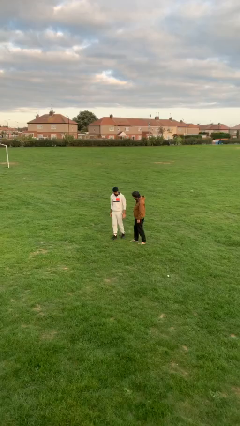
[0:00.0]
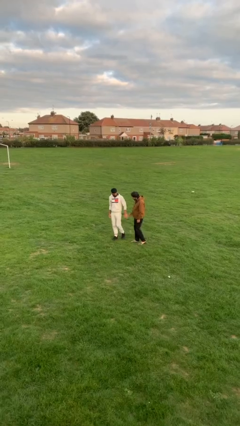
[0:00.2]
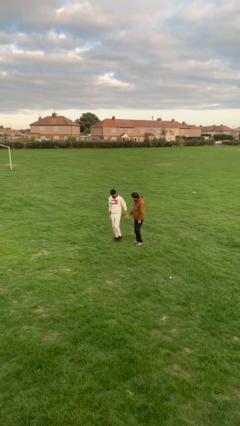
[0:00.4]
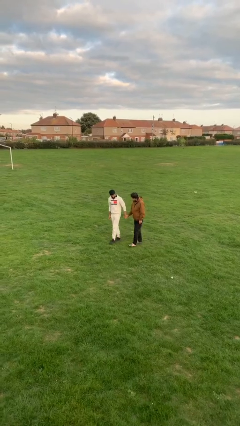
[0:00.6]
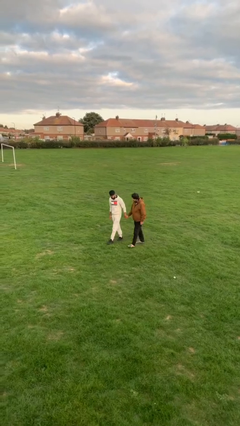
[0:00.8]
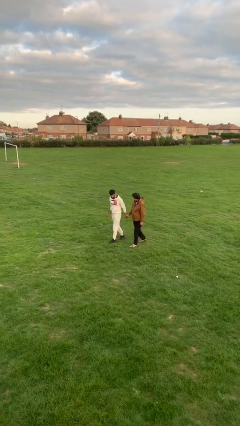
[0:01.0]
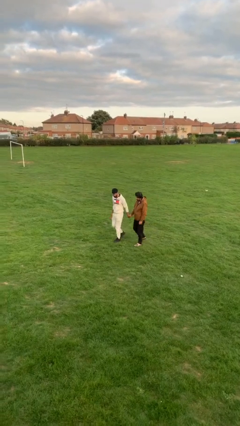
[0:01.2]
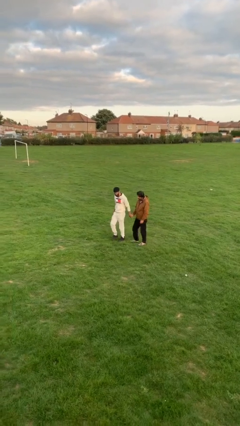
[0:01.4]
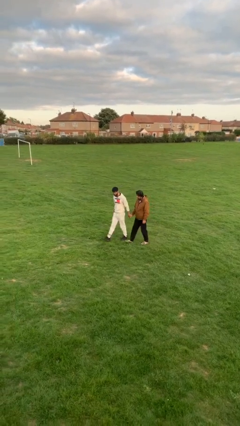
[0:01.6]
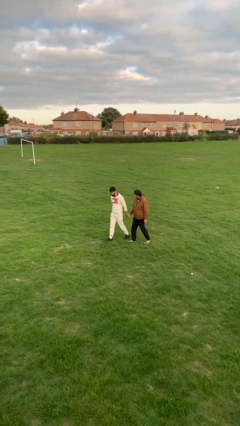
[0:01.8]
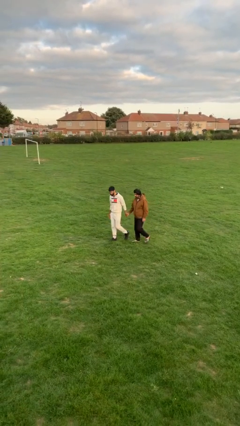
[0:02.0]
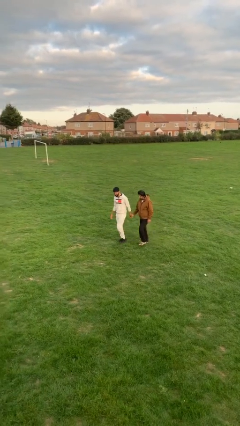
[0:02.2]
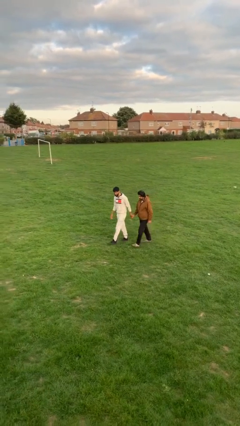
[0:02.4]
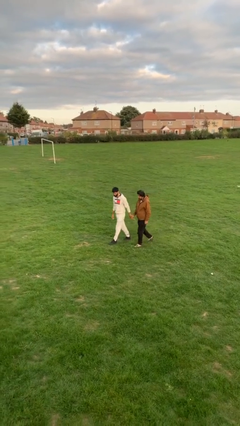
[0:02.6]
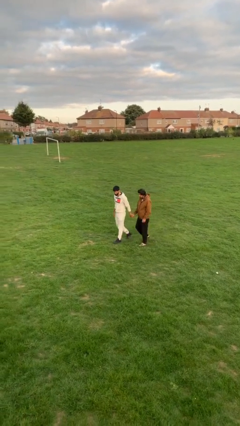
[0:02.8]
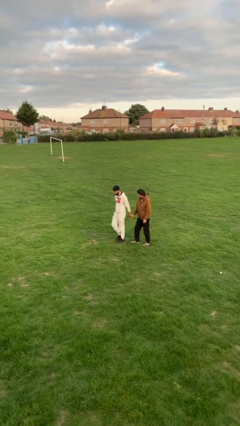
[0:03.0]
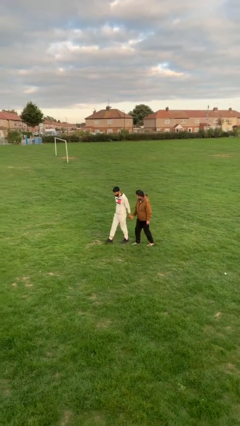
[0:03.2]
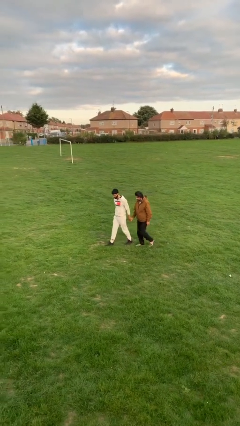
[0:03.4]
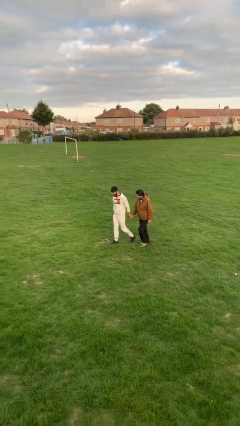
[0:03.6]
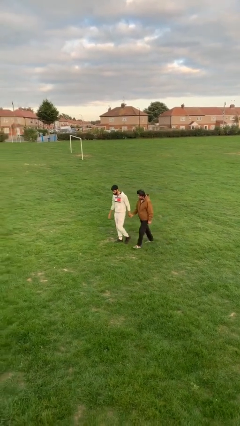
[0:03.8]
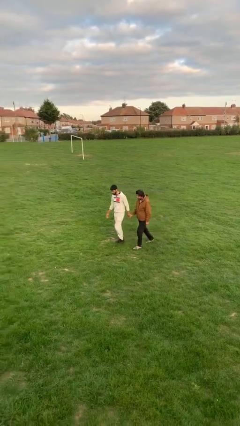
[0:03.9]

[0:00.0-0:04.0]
person holds hand

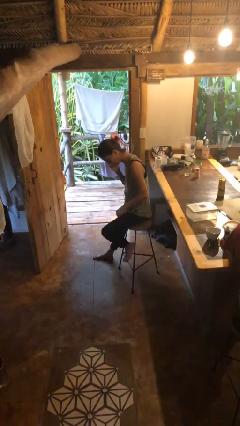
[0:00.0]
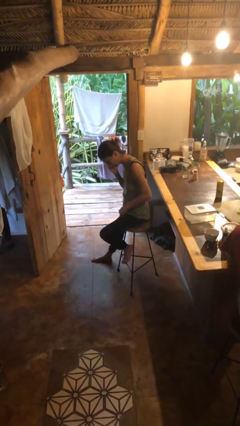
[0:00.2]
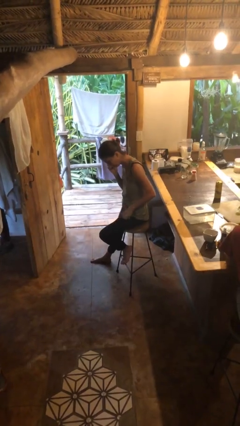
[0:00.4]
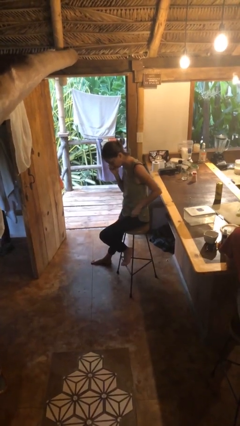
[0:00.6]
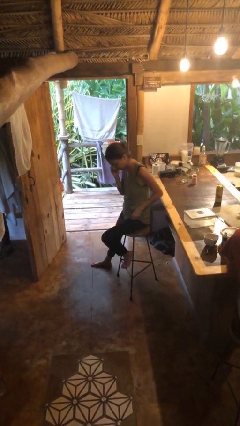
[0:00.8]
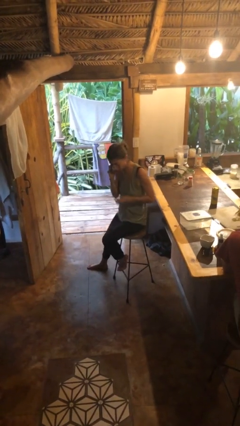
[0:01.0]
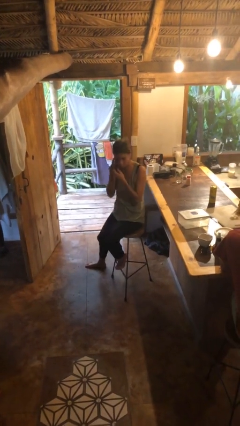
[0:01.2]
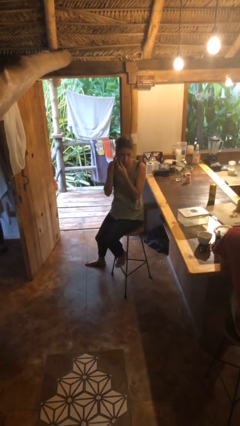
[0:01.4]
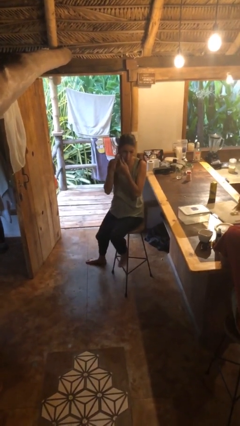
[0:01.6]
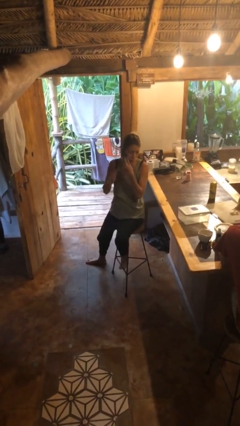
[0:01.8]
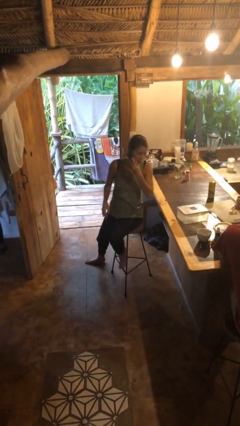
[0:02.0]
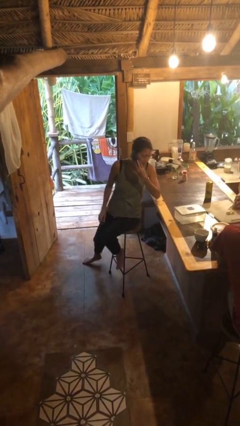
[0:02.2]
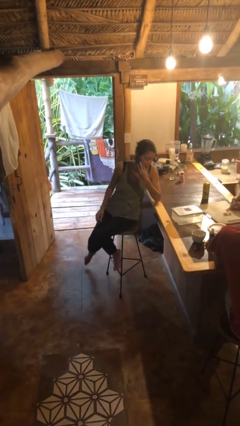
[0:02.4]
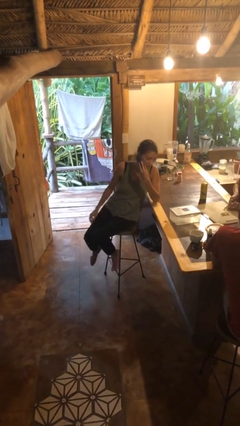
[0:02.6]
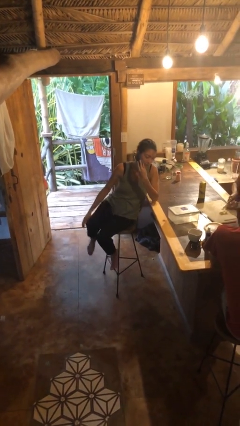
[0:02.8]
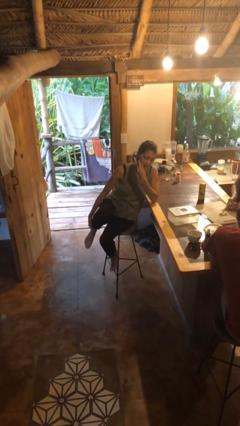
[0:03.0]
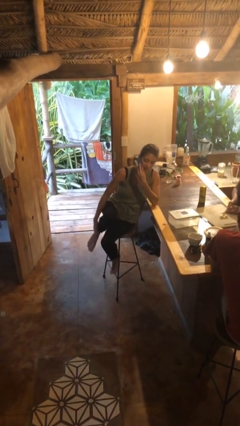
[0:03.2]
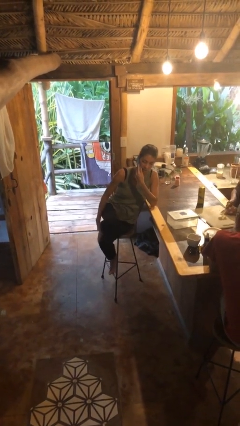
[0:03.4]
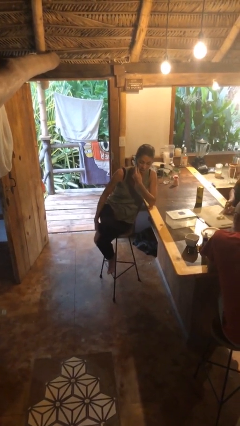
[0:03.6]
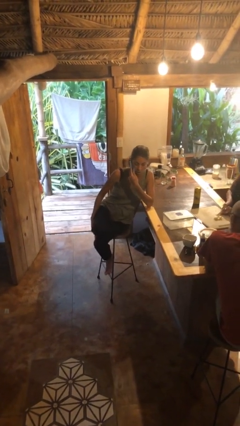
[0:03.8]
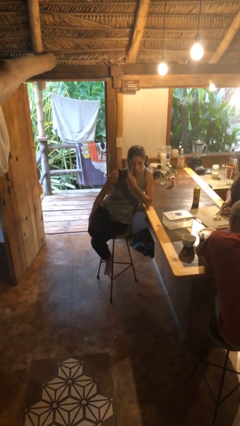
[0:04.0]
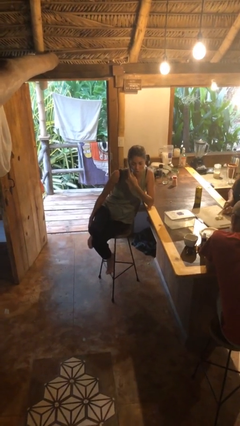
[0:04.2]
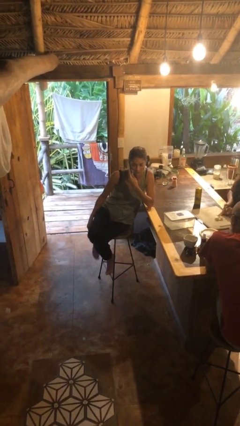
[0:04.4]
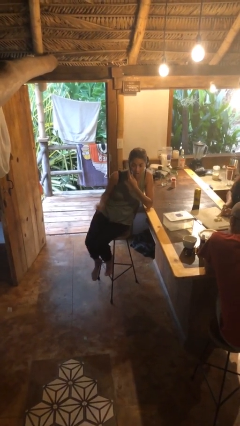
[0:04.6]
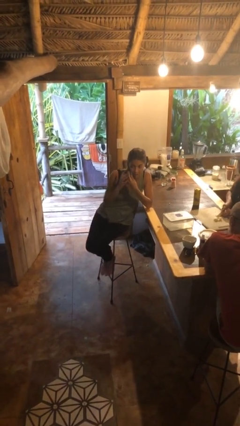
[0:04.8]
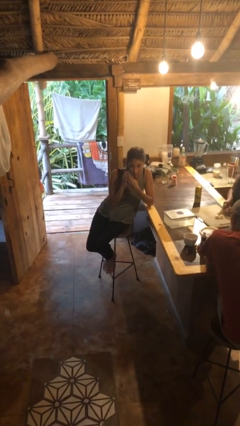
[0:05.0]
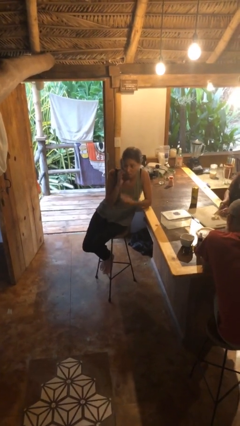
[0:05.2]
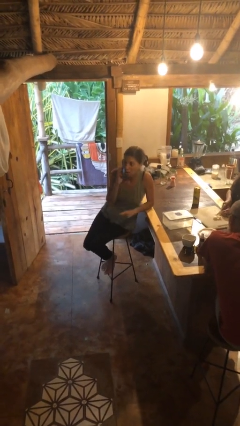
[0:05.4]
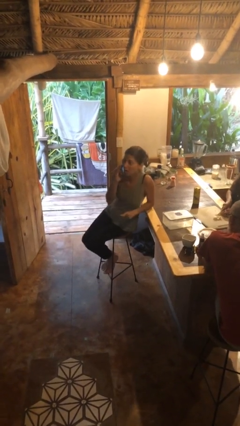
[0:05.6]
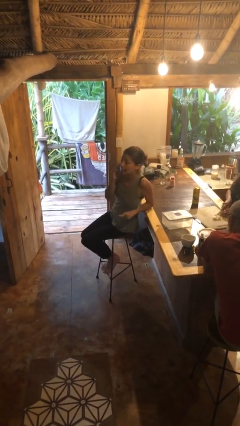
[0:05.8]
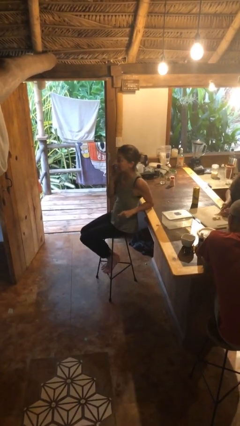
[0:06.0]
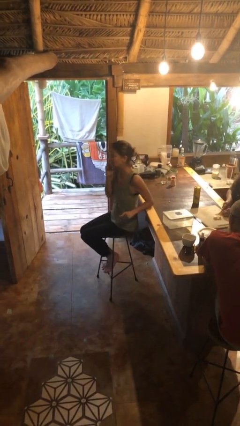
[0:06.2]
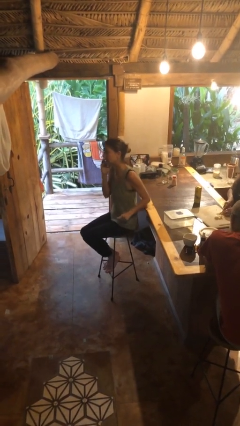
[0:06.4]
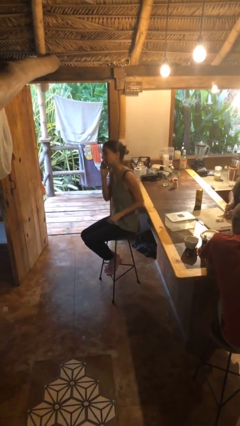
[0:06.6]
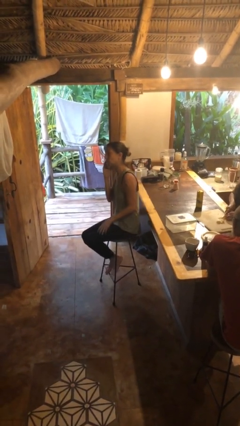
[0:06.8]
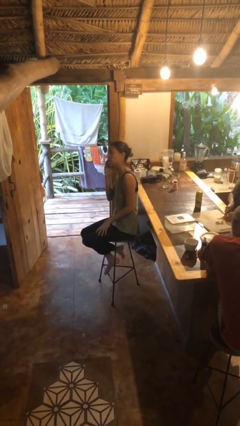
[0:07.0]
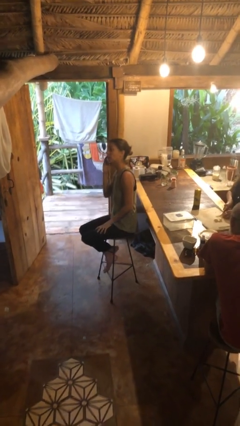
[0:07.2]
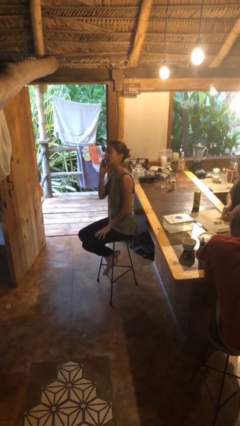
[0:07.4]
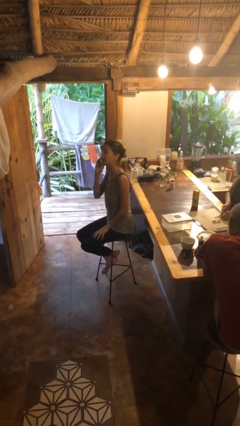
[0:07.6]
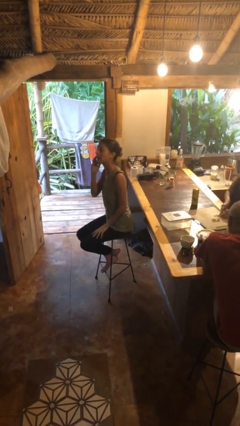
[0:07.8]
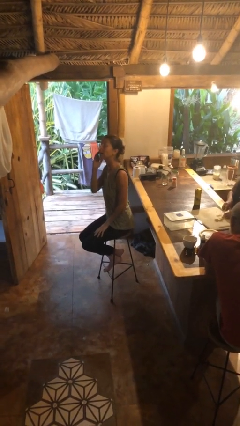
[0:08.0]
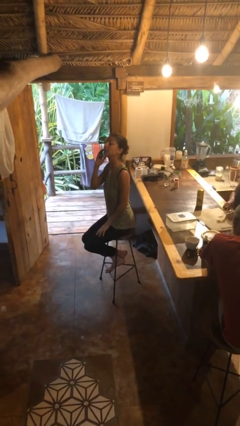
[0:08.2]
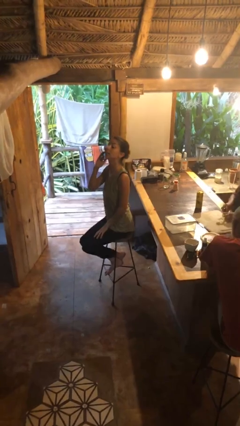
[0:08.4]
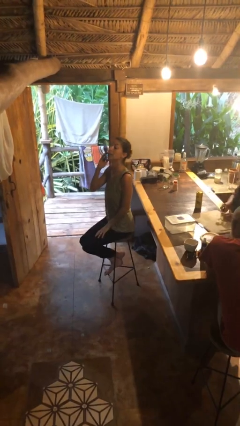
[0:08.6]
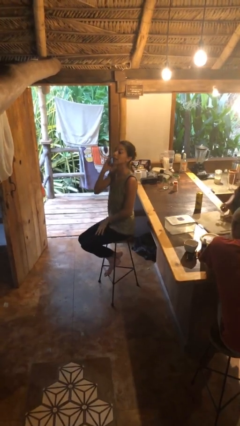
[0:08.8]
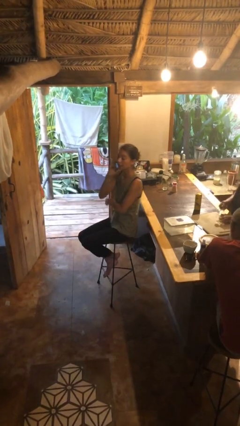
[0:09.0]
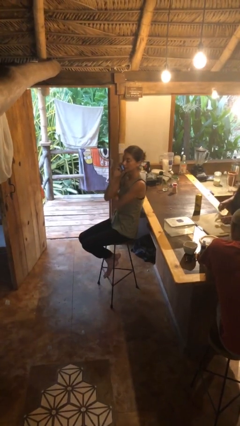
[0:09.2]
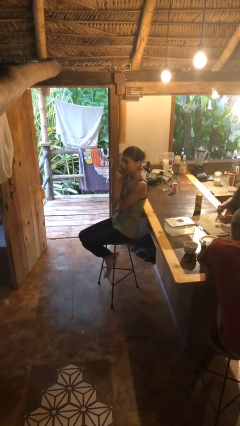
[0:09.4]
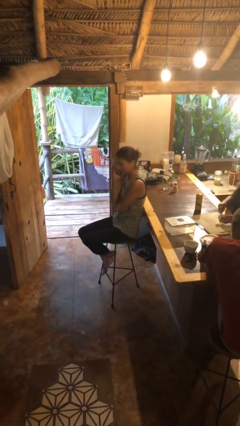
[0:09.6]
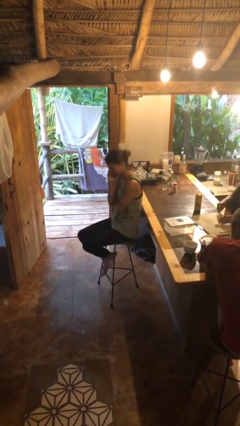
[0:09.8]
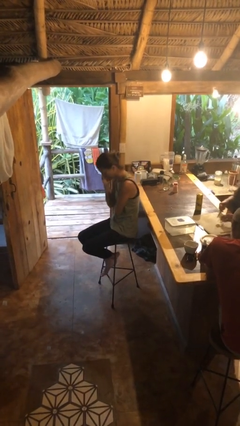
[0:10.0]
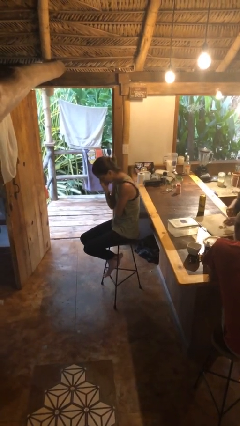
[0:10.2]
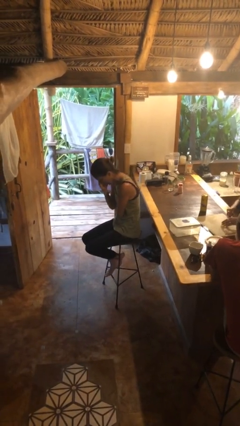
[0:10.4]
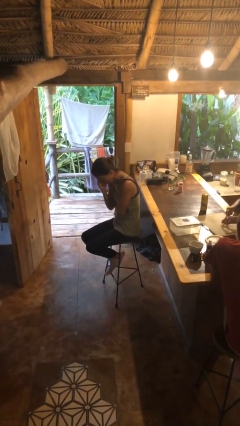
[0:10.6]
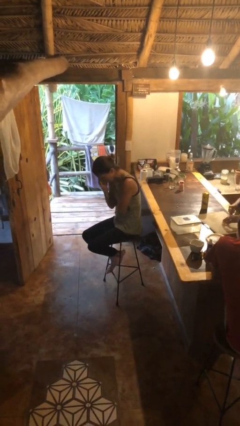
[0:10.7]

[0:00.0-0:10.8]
person talks on phone

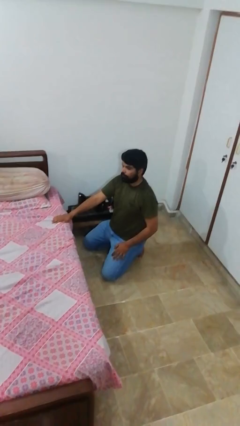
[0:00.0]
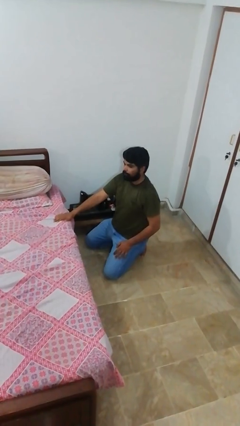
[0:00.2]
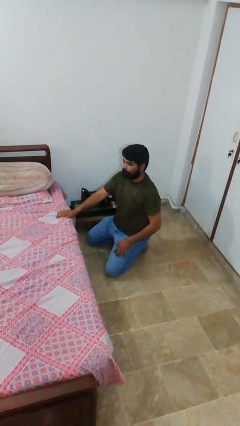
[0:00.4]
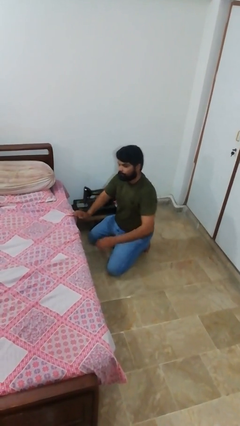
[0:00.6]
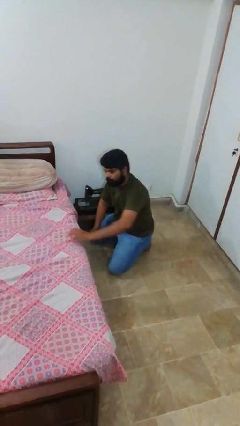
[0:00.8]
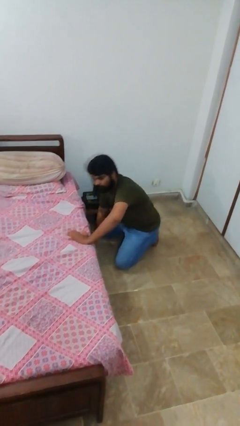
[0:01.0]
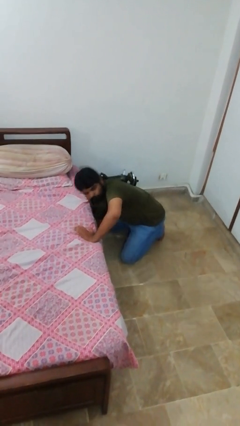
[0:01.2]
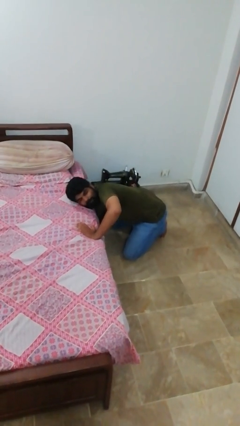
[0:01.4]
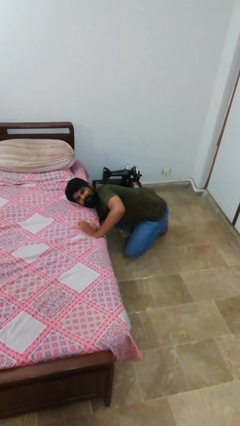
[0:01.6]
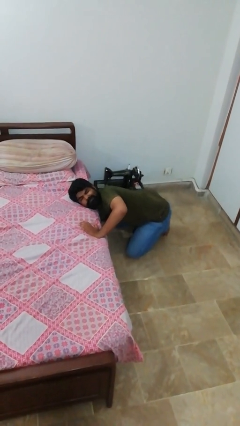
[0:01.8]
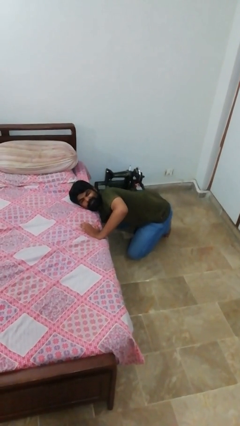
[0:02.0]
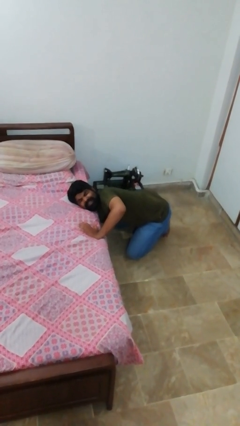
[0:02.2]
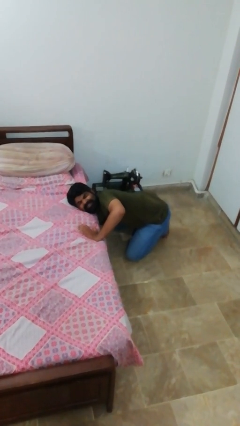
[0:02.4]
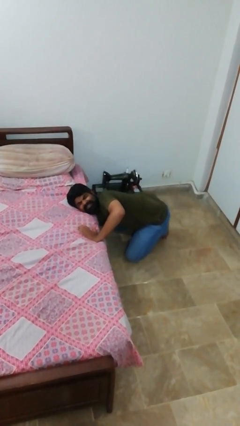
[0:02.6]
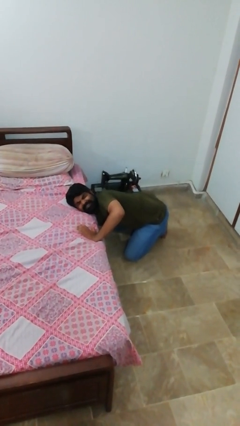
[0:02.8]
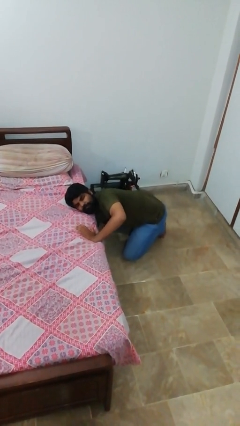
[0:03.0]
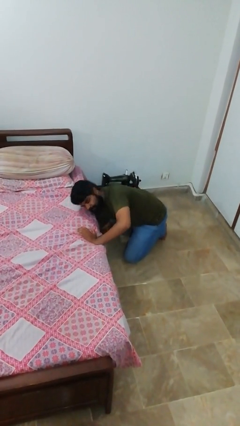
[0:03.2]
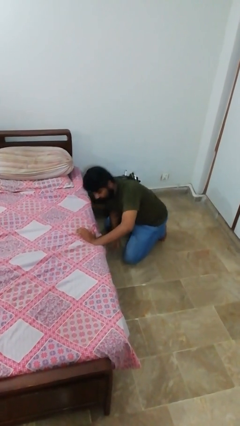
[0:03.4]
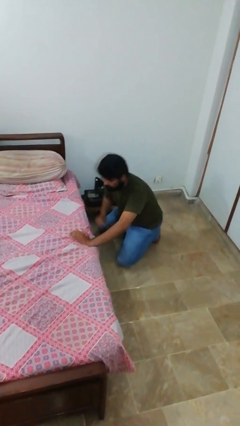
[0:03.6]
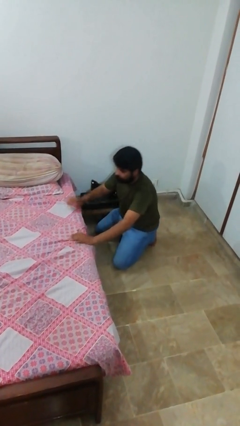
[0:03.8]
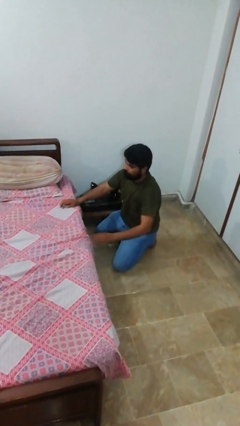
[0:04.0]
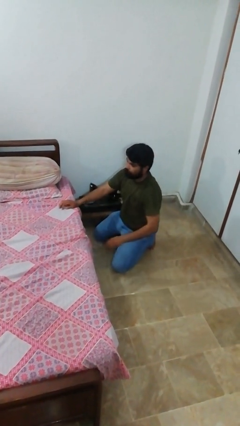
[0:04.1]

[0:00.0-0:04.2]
person searches under bed
